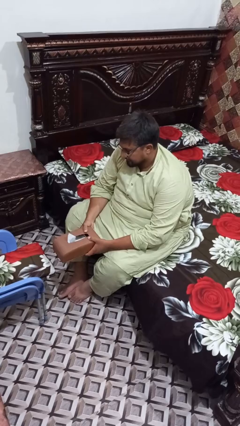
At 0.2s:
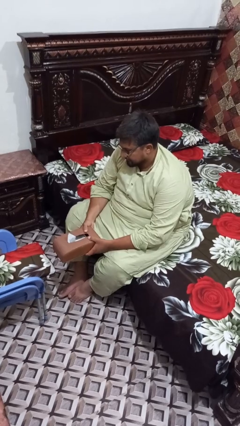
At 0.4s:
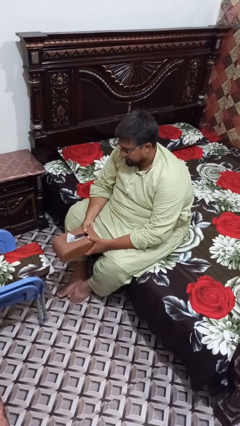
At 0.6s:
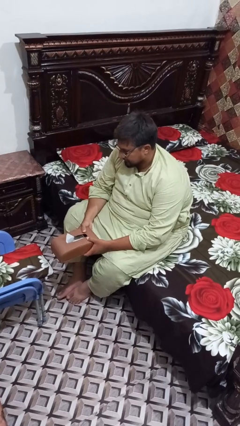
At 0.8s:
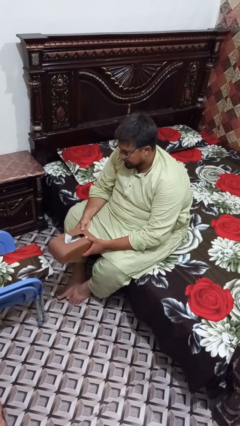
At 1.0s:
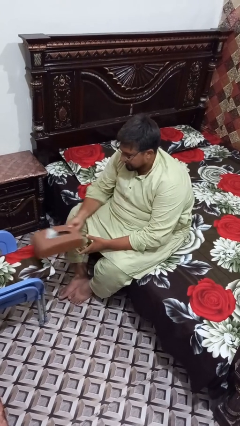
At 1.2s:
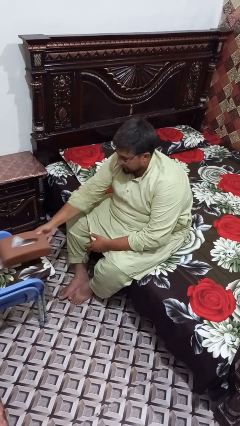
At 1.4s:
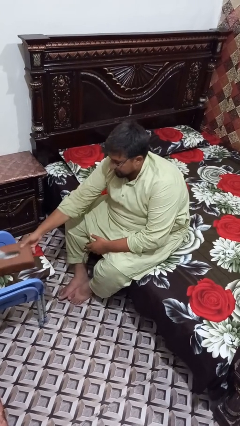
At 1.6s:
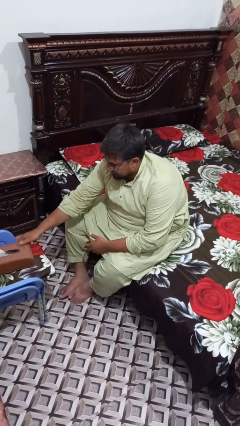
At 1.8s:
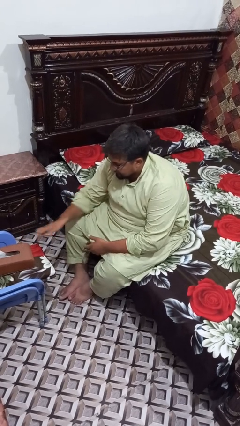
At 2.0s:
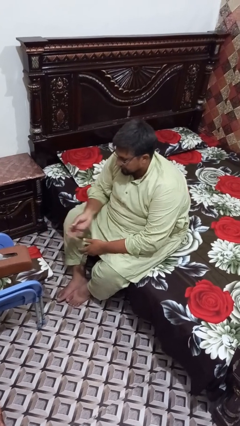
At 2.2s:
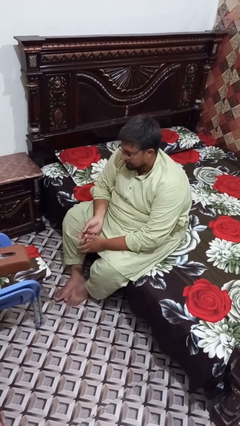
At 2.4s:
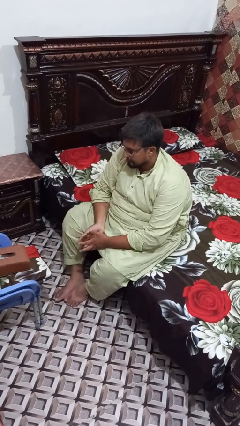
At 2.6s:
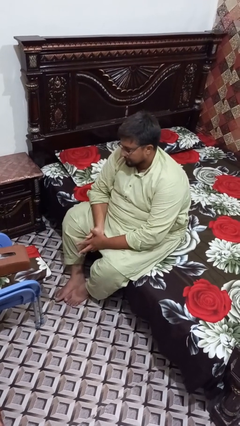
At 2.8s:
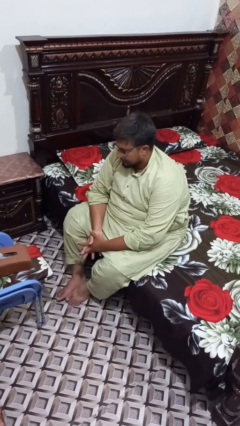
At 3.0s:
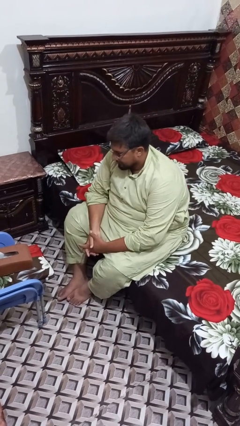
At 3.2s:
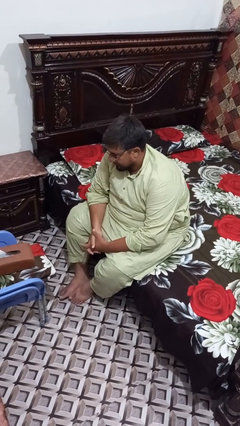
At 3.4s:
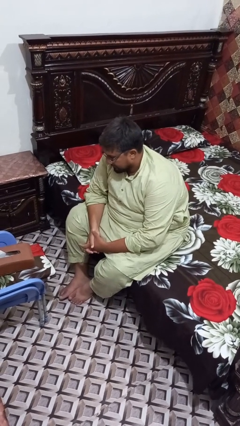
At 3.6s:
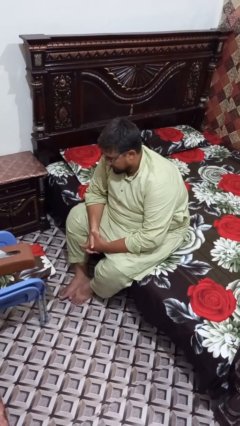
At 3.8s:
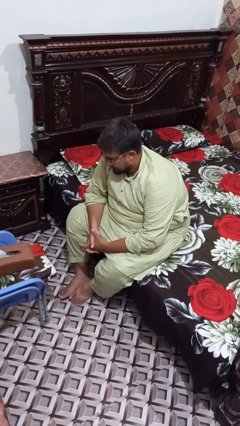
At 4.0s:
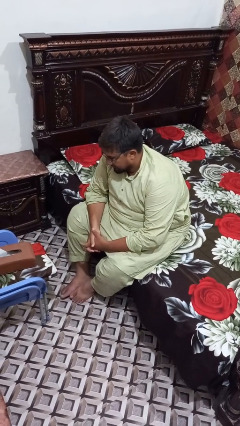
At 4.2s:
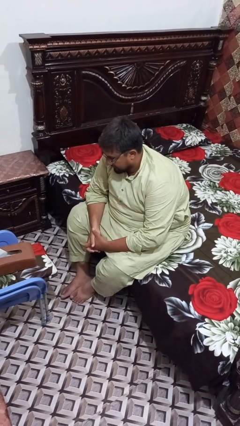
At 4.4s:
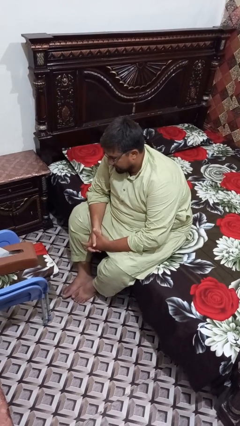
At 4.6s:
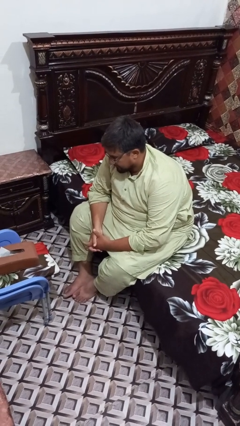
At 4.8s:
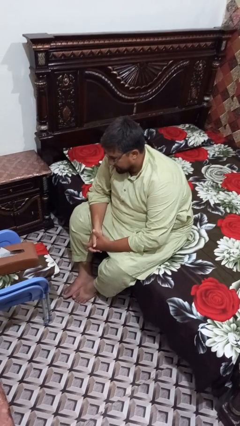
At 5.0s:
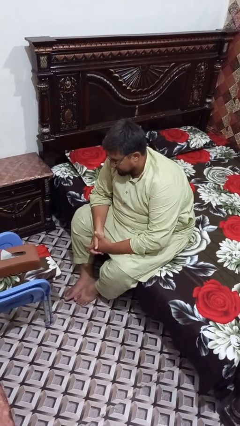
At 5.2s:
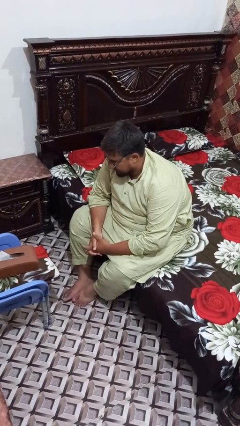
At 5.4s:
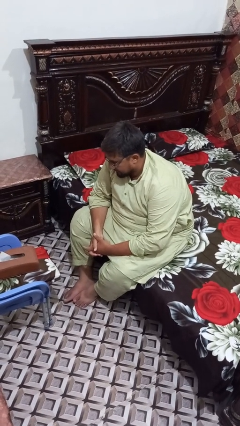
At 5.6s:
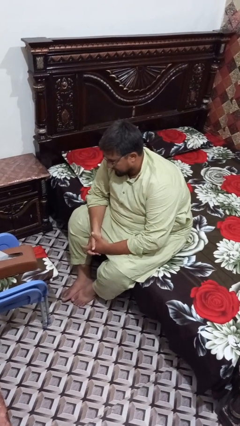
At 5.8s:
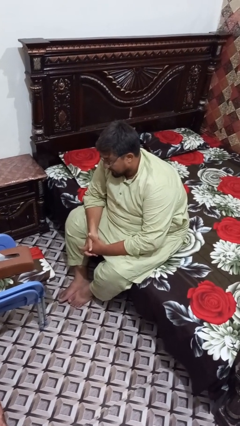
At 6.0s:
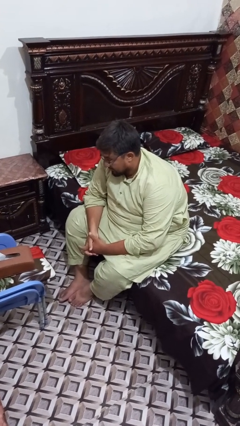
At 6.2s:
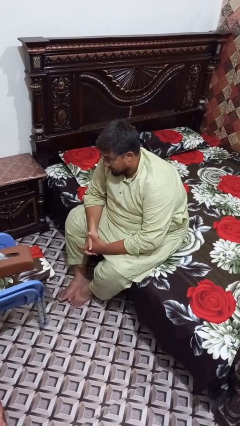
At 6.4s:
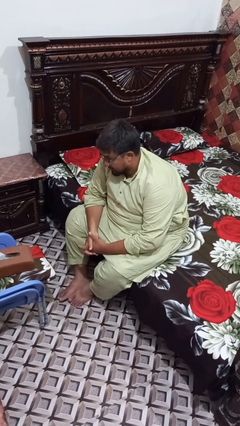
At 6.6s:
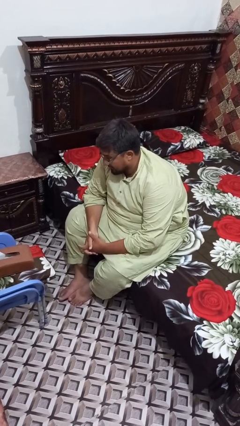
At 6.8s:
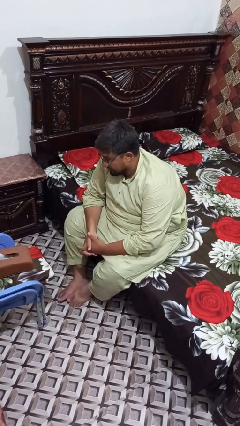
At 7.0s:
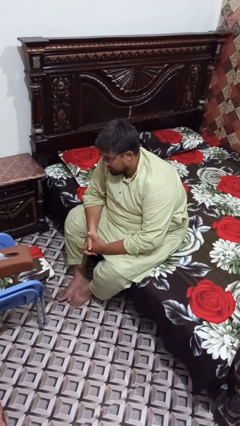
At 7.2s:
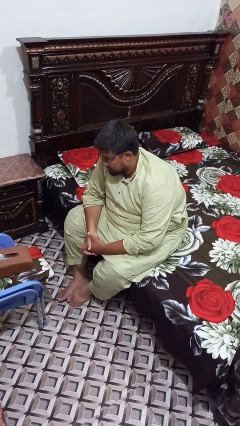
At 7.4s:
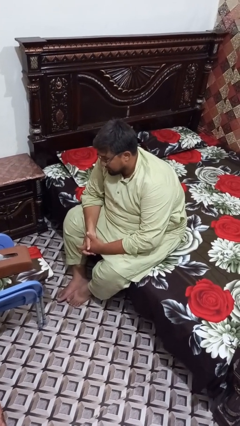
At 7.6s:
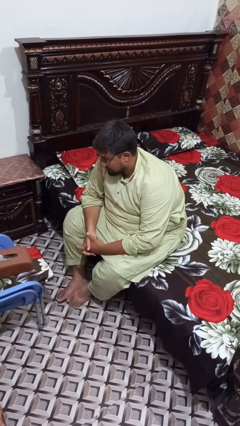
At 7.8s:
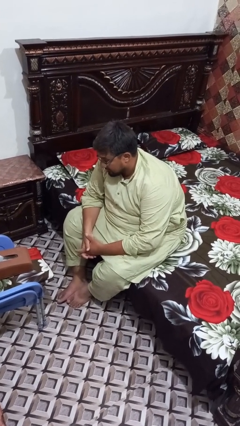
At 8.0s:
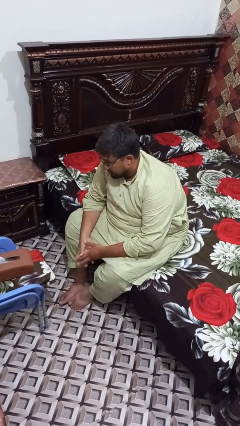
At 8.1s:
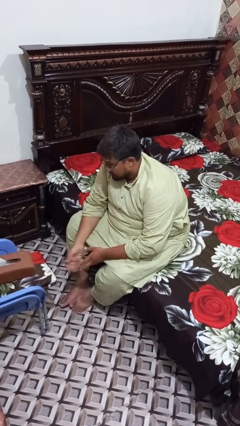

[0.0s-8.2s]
person puts down object on couch

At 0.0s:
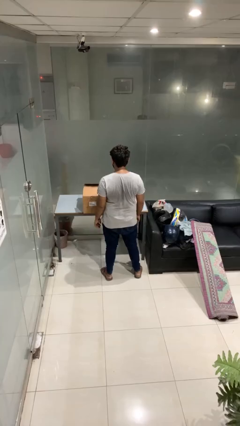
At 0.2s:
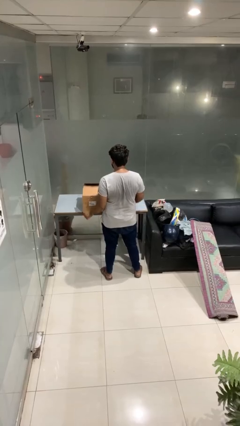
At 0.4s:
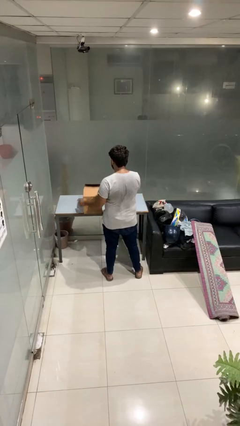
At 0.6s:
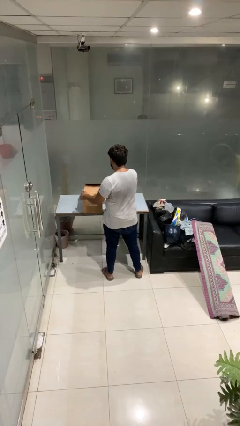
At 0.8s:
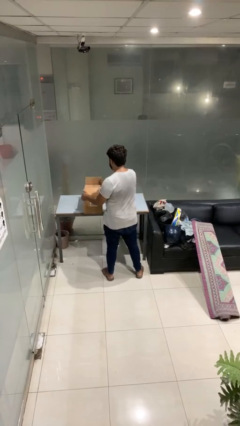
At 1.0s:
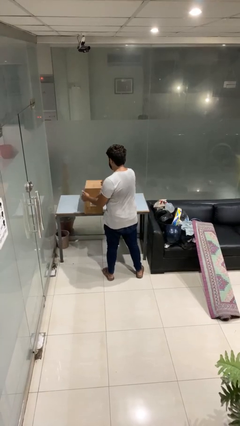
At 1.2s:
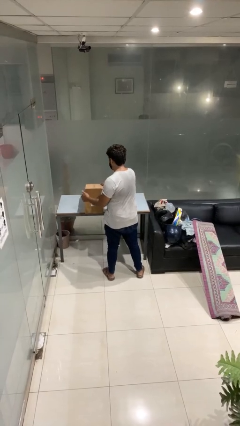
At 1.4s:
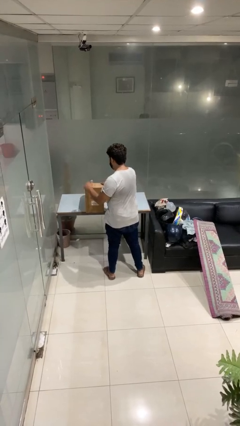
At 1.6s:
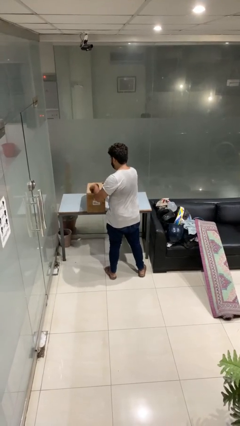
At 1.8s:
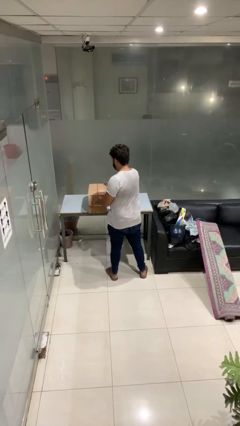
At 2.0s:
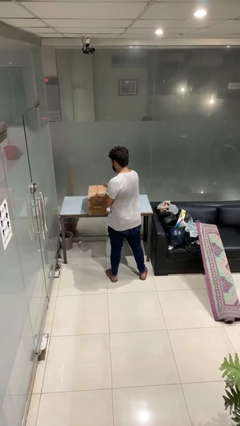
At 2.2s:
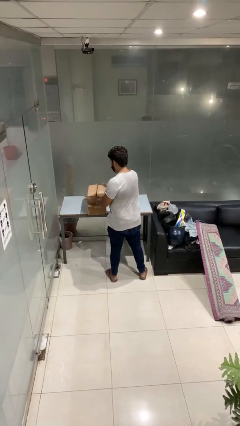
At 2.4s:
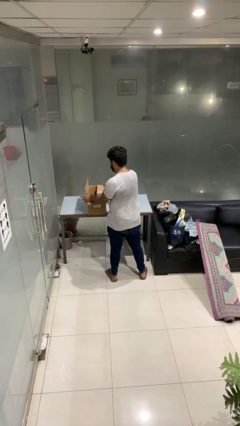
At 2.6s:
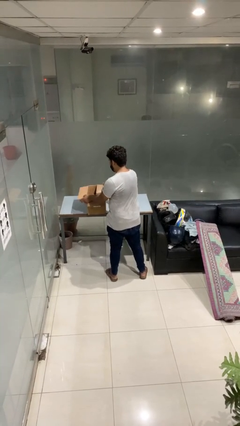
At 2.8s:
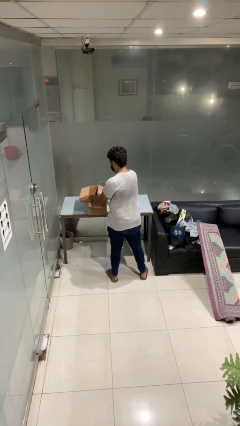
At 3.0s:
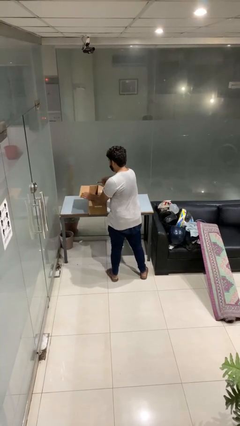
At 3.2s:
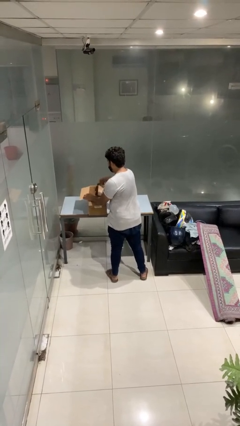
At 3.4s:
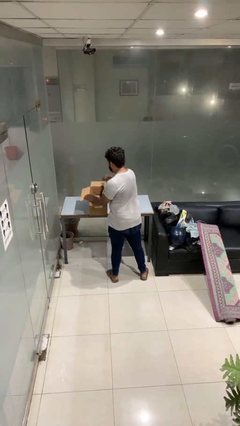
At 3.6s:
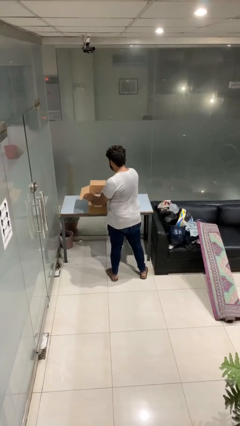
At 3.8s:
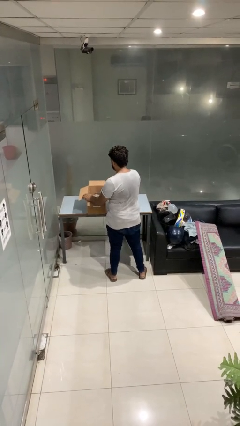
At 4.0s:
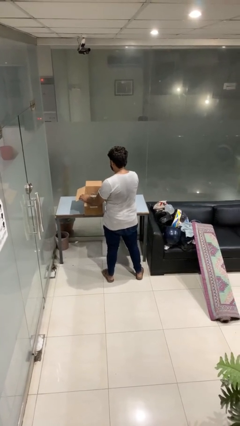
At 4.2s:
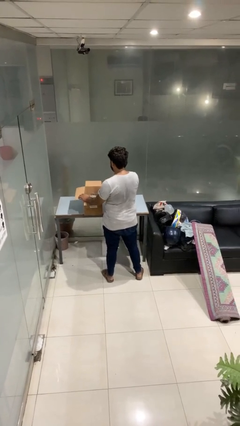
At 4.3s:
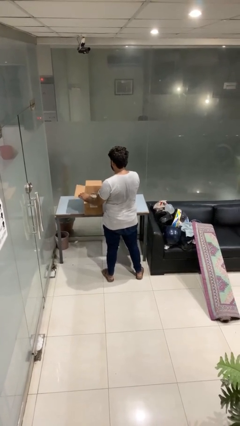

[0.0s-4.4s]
person opens box

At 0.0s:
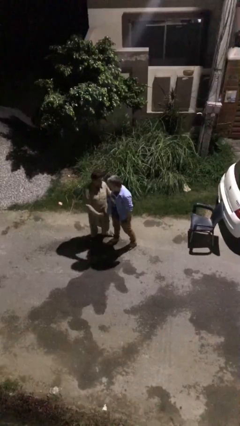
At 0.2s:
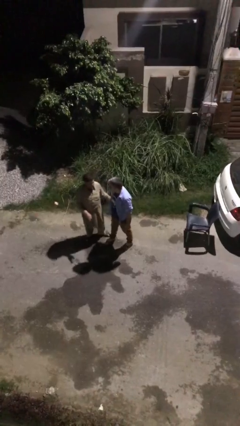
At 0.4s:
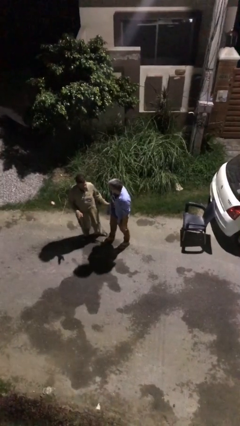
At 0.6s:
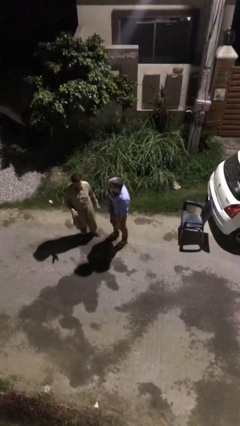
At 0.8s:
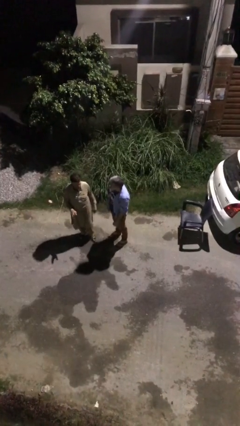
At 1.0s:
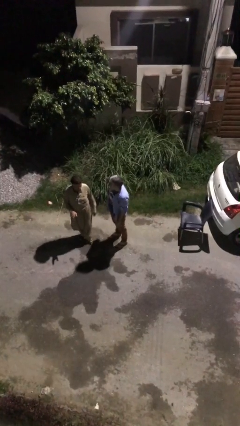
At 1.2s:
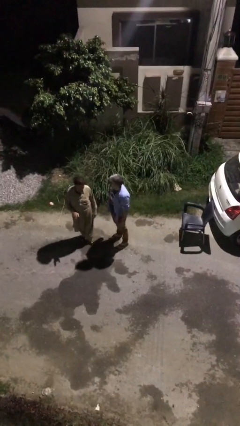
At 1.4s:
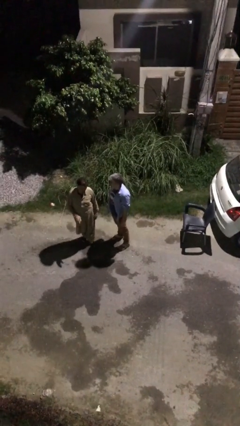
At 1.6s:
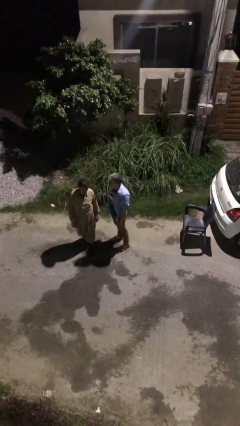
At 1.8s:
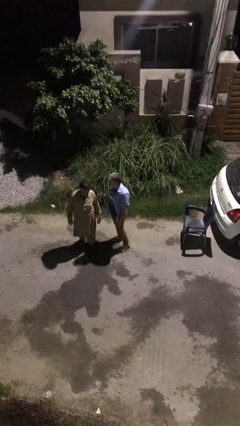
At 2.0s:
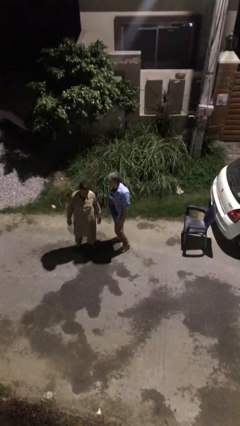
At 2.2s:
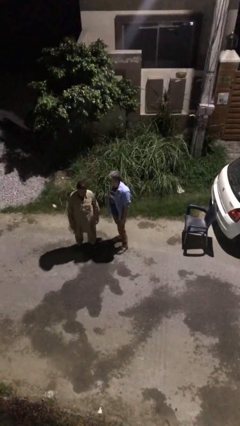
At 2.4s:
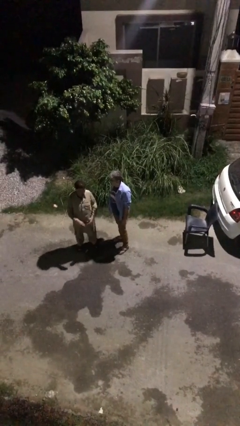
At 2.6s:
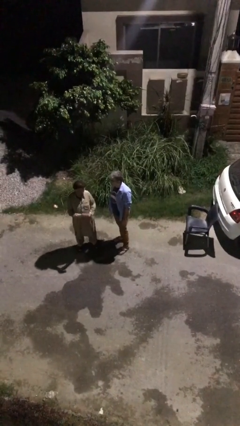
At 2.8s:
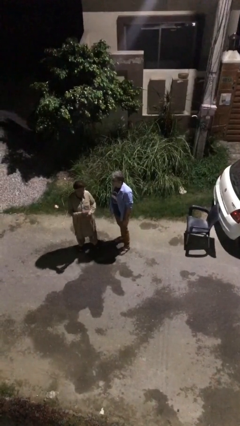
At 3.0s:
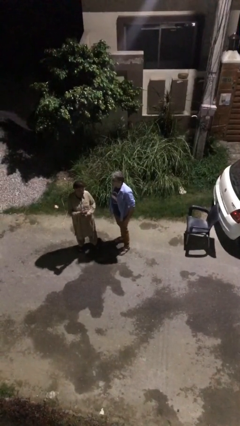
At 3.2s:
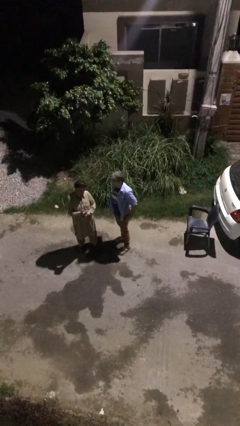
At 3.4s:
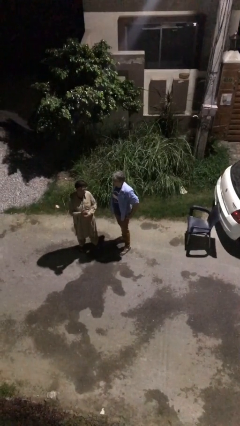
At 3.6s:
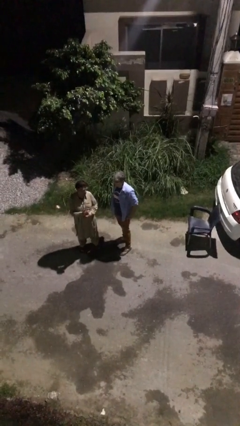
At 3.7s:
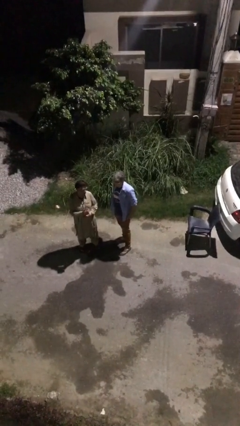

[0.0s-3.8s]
person talks to person

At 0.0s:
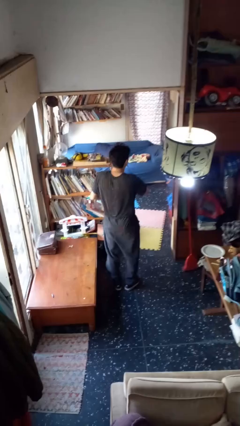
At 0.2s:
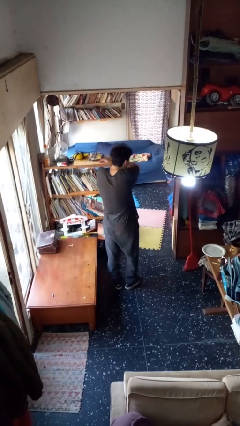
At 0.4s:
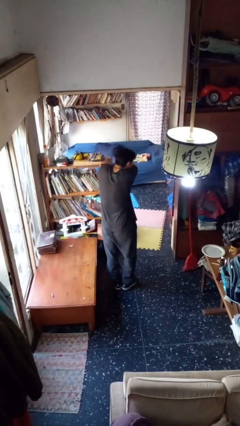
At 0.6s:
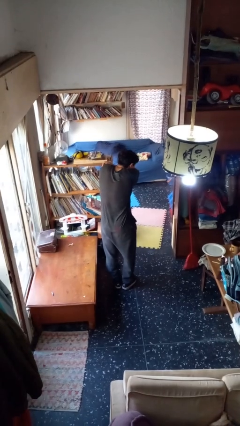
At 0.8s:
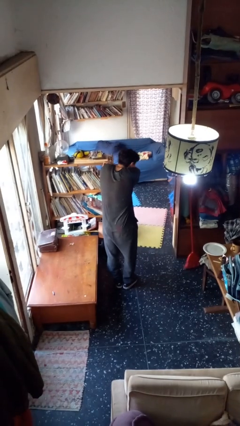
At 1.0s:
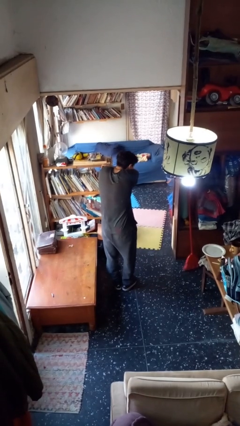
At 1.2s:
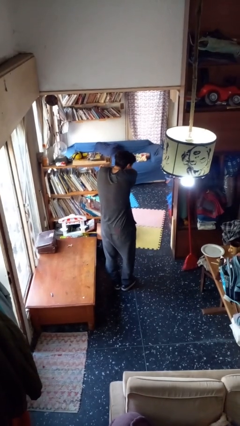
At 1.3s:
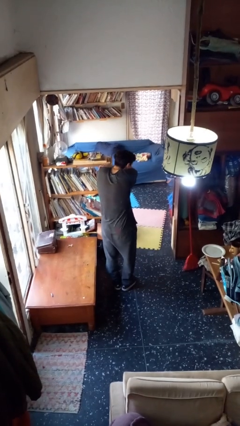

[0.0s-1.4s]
person sneezes into arm

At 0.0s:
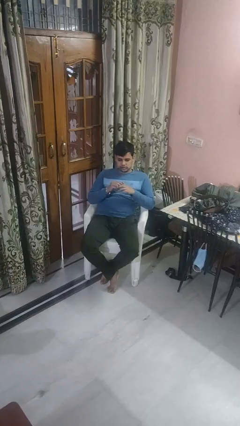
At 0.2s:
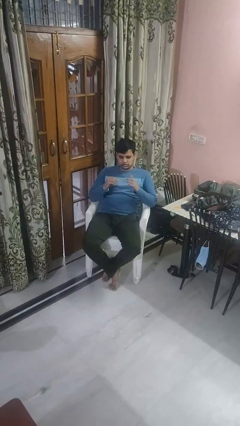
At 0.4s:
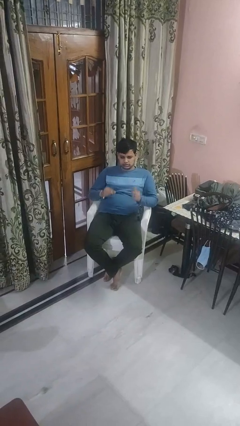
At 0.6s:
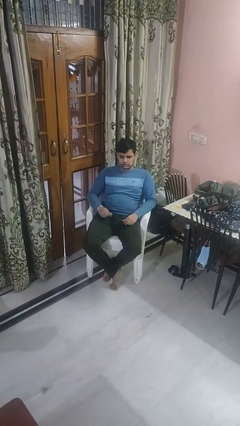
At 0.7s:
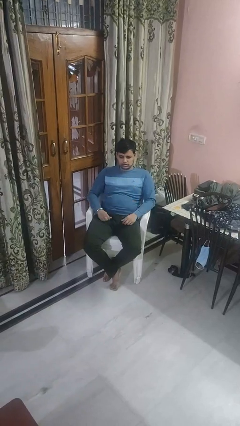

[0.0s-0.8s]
person takes off ring
